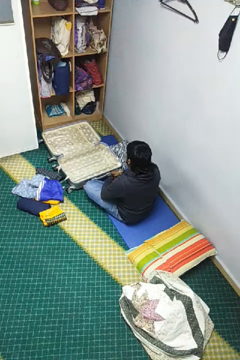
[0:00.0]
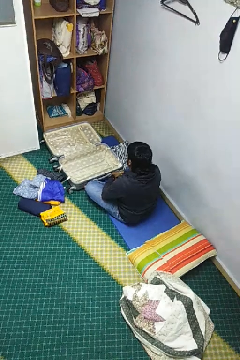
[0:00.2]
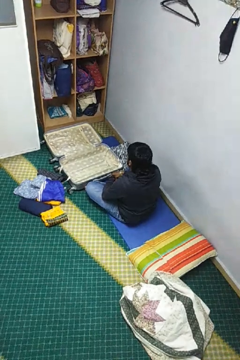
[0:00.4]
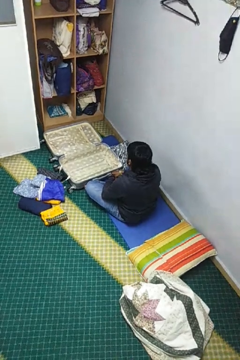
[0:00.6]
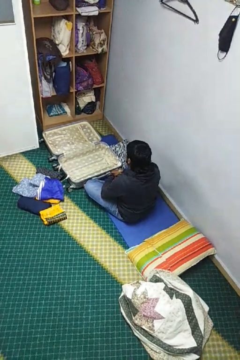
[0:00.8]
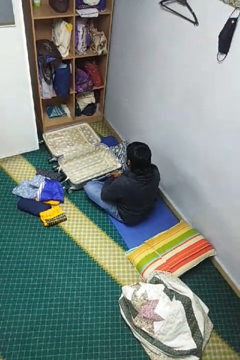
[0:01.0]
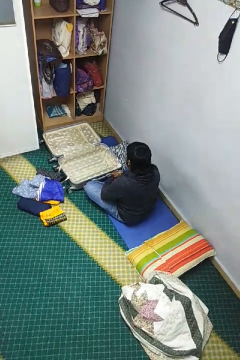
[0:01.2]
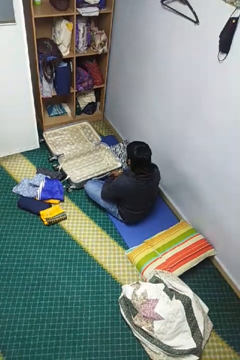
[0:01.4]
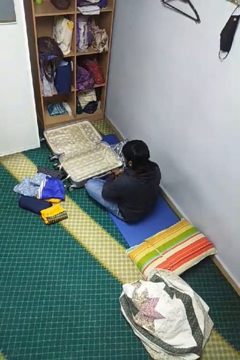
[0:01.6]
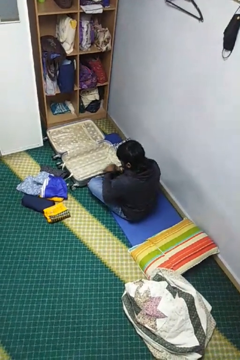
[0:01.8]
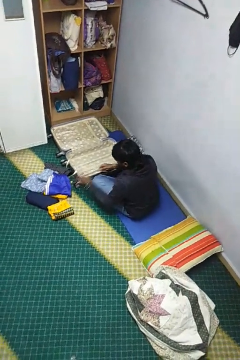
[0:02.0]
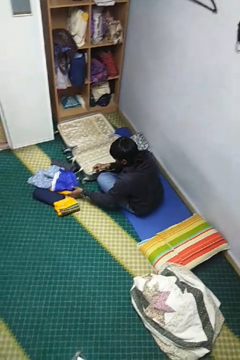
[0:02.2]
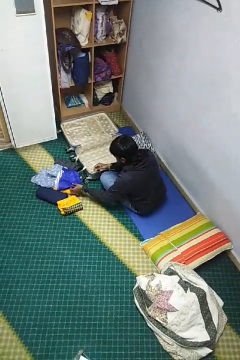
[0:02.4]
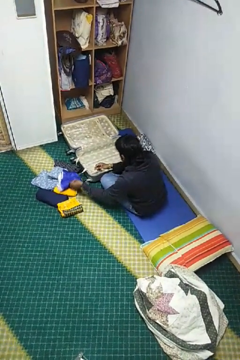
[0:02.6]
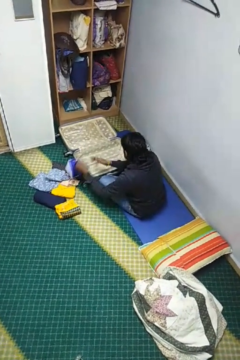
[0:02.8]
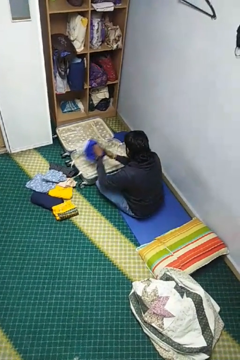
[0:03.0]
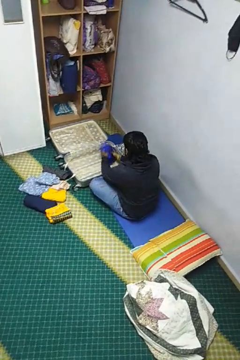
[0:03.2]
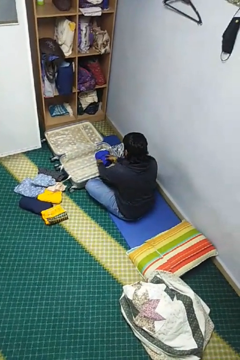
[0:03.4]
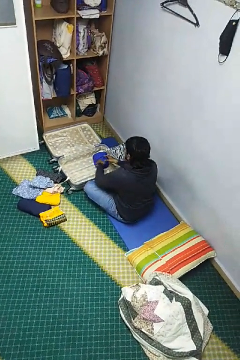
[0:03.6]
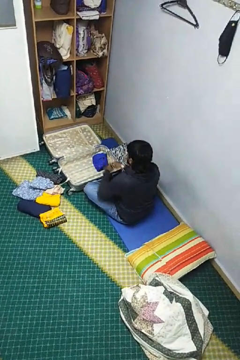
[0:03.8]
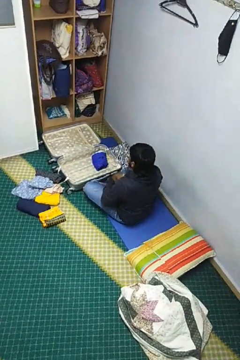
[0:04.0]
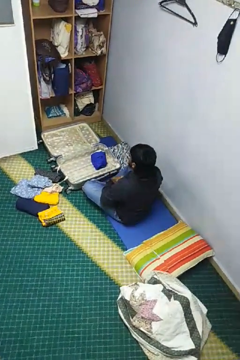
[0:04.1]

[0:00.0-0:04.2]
person loads clothes into suitcase

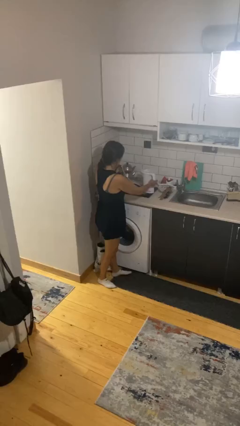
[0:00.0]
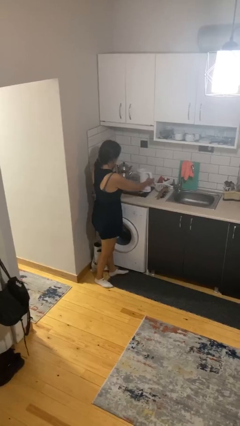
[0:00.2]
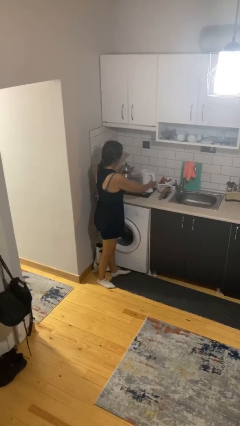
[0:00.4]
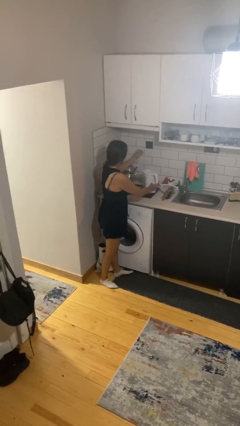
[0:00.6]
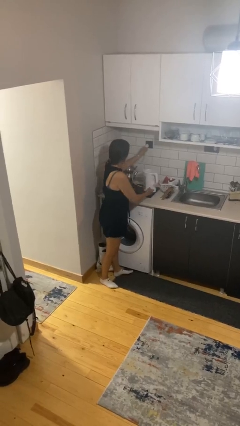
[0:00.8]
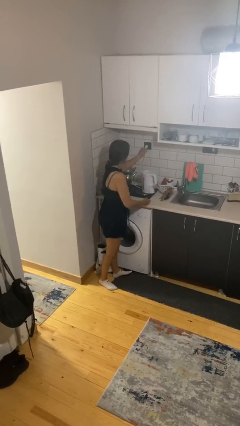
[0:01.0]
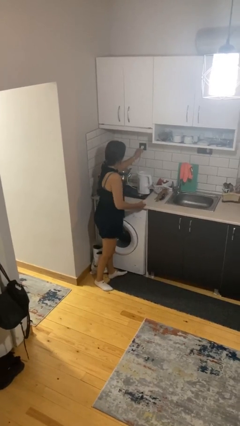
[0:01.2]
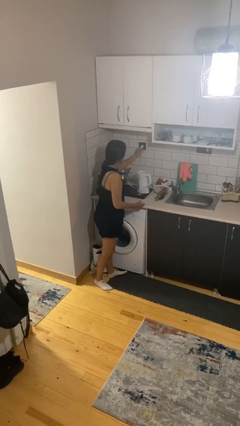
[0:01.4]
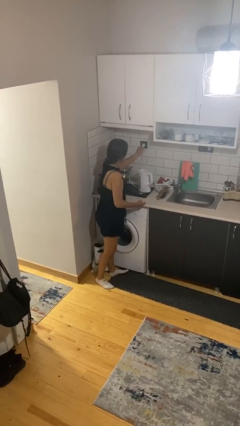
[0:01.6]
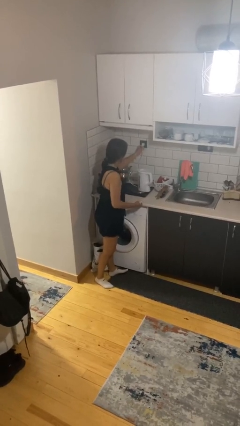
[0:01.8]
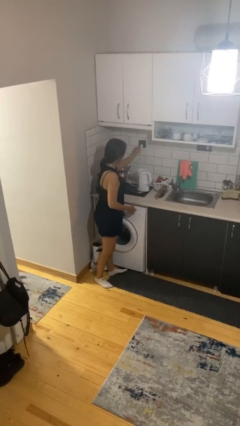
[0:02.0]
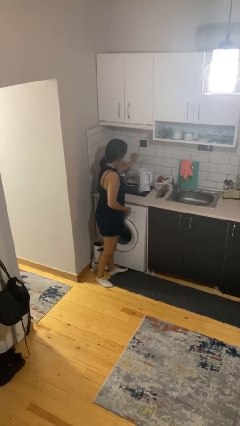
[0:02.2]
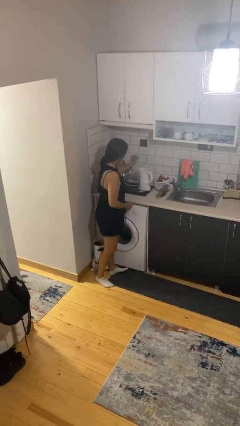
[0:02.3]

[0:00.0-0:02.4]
person plugs into electrical socket

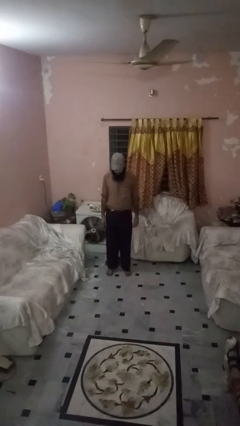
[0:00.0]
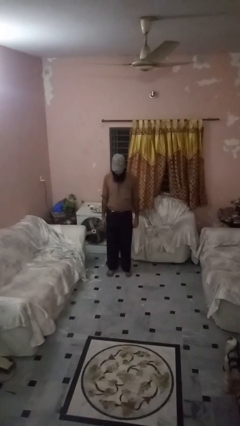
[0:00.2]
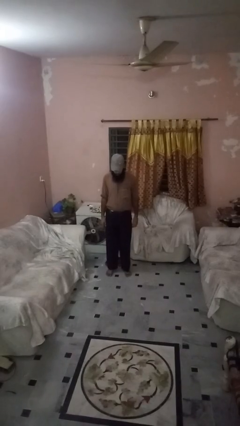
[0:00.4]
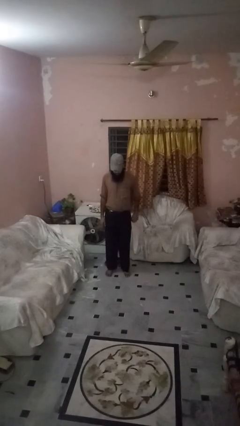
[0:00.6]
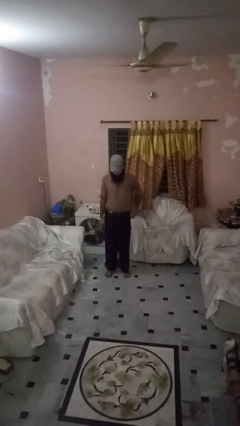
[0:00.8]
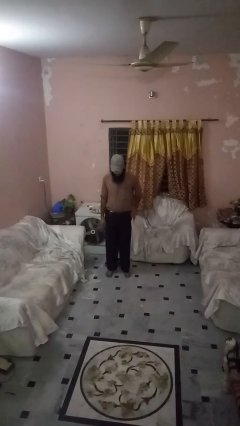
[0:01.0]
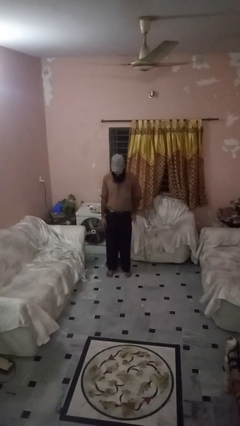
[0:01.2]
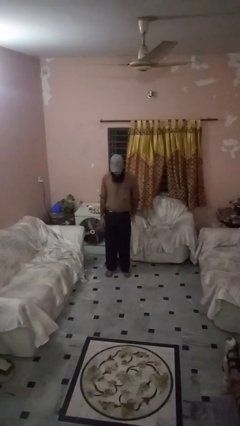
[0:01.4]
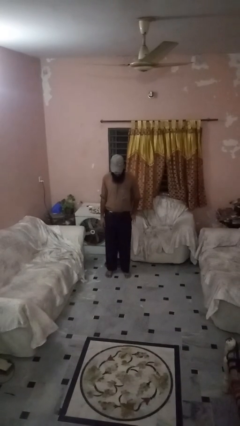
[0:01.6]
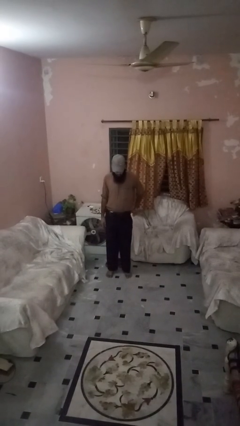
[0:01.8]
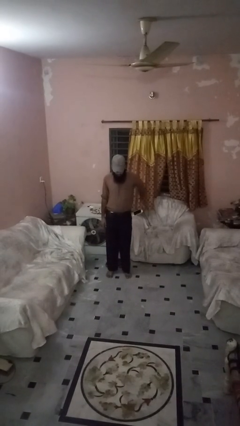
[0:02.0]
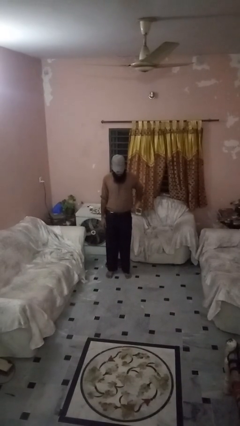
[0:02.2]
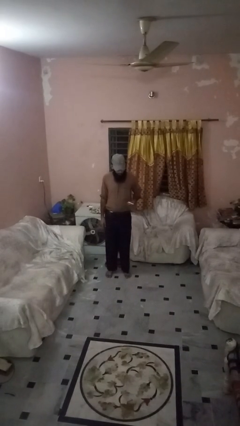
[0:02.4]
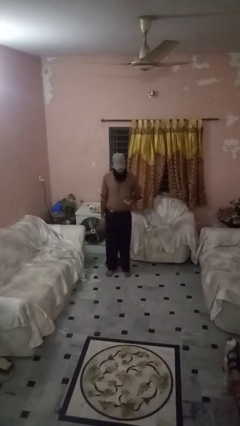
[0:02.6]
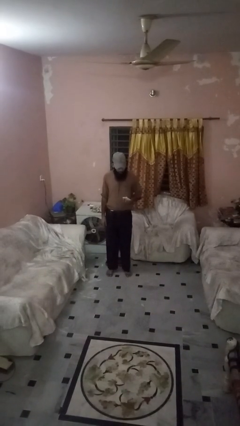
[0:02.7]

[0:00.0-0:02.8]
person takes phone from pocket

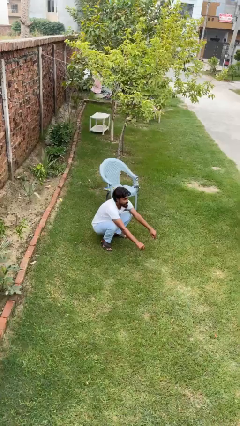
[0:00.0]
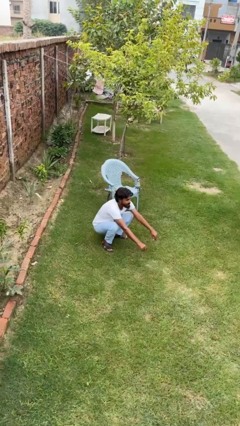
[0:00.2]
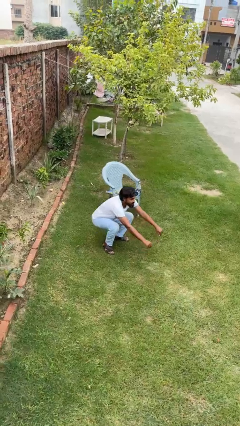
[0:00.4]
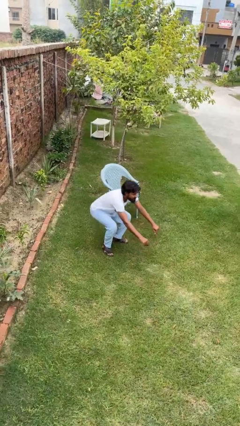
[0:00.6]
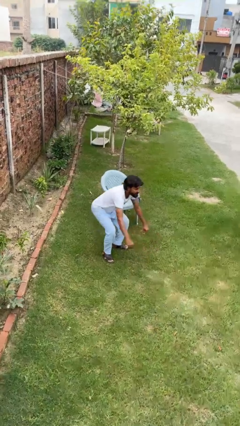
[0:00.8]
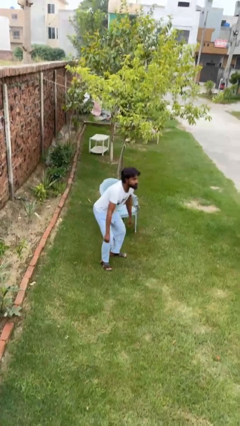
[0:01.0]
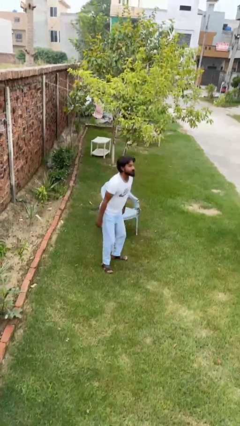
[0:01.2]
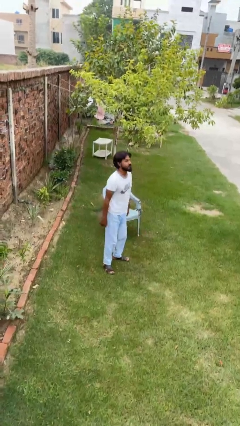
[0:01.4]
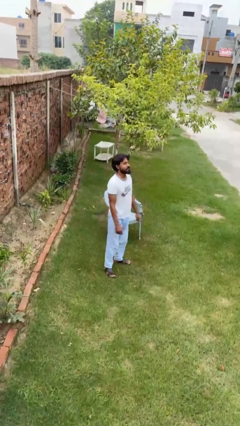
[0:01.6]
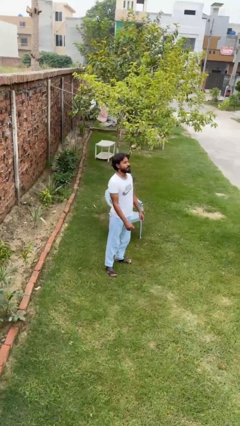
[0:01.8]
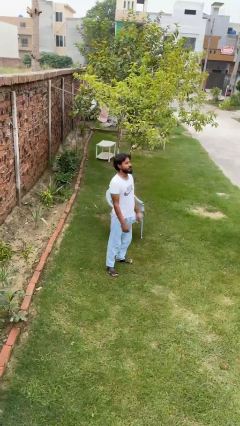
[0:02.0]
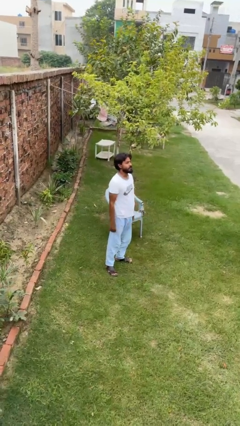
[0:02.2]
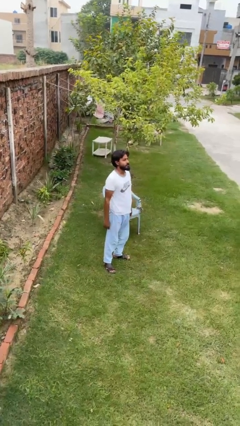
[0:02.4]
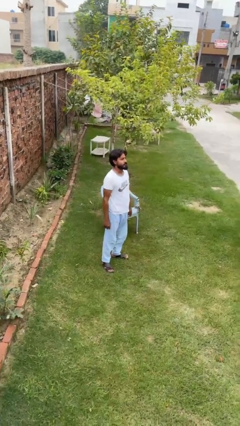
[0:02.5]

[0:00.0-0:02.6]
person stands up

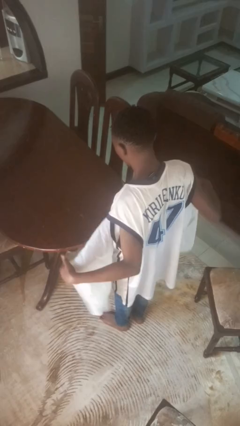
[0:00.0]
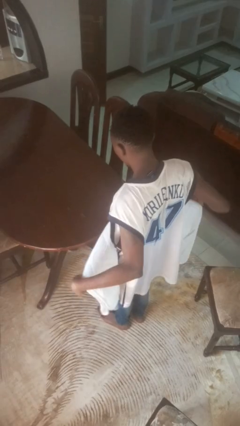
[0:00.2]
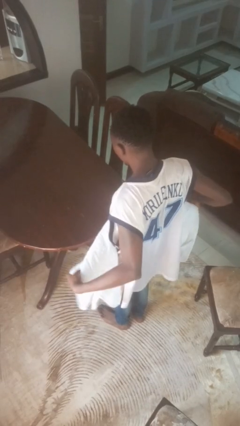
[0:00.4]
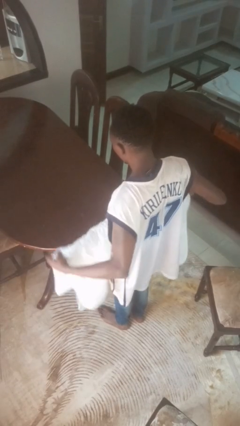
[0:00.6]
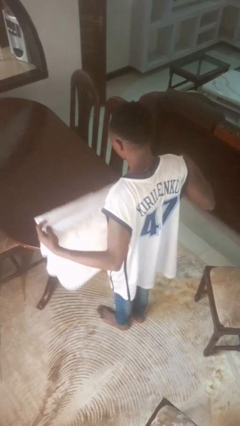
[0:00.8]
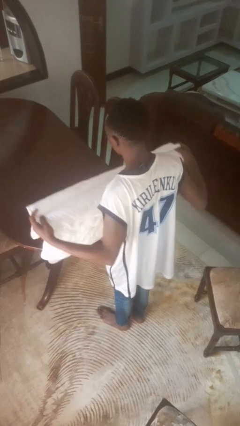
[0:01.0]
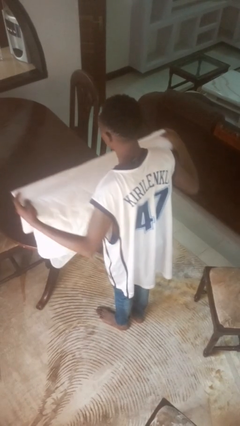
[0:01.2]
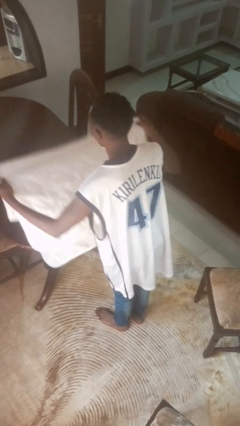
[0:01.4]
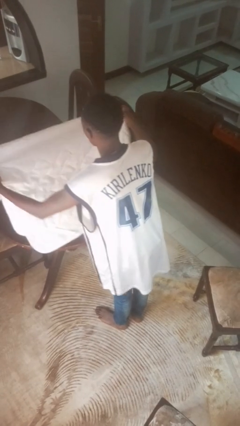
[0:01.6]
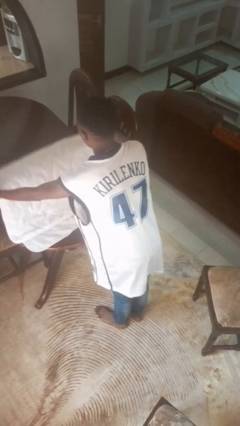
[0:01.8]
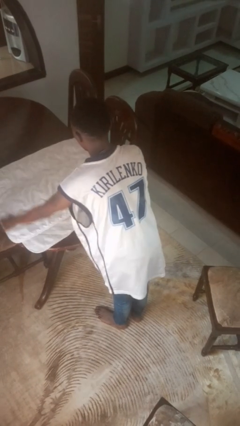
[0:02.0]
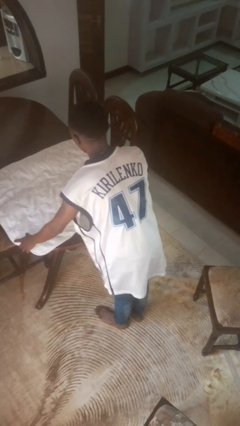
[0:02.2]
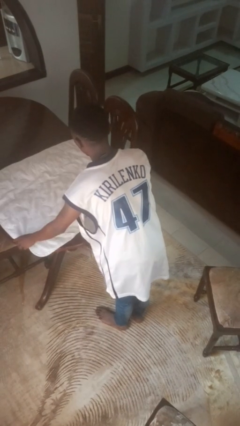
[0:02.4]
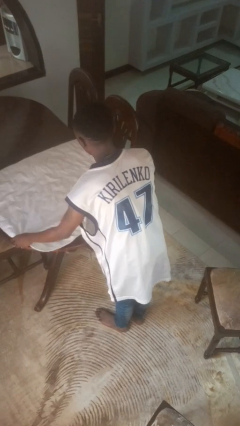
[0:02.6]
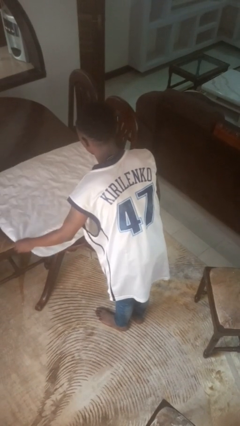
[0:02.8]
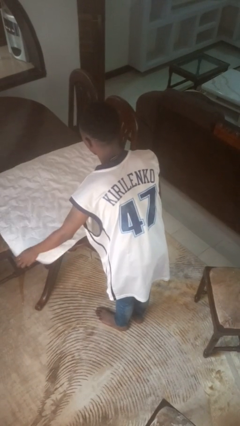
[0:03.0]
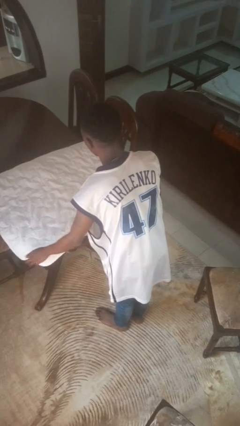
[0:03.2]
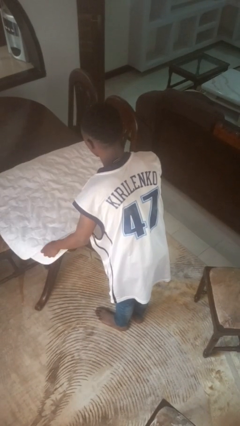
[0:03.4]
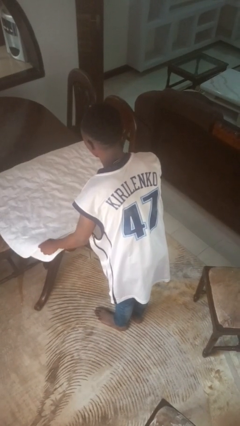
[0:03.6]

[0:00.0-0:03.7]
person spreads tablecloth

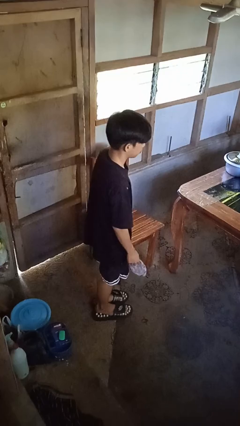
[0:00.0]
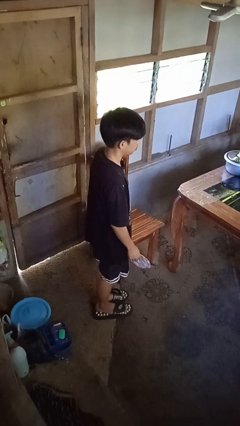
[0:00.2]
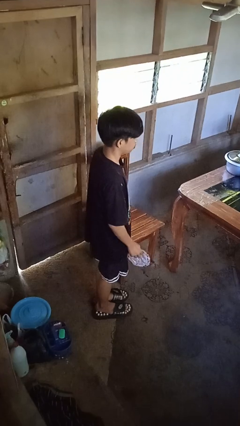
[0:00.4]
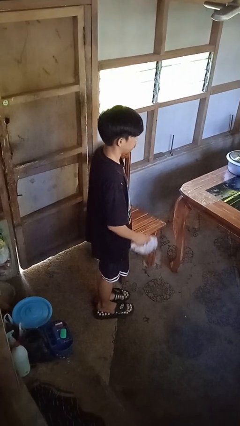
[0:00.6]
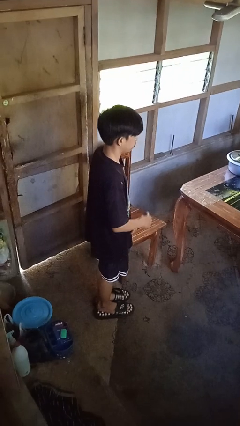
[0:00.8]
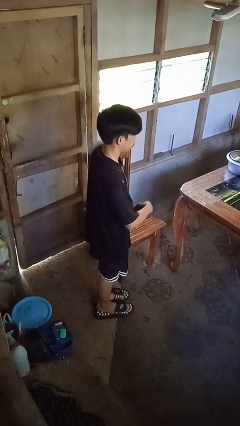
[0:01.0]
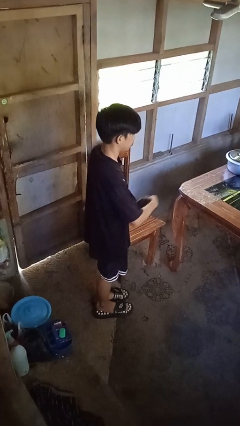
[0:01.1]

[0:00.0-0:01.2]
person throws object on table

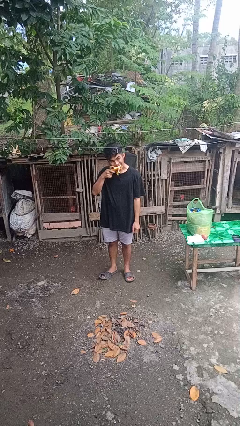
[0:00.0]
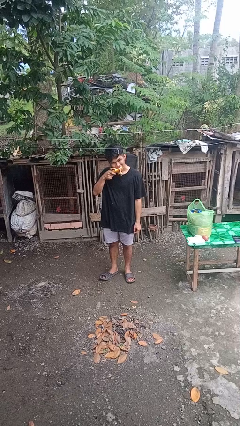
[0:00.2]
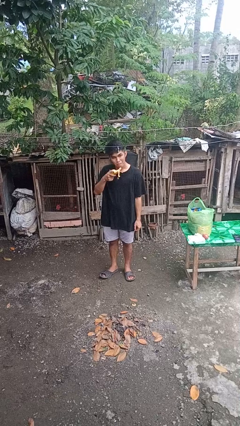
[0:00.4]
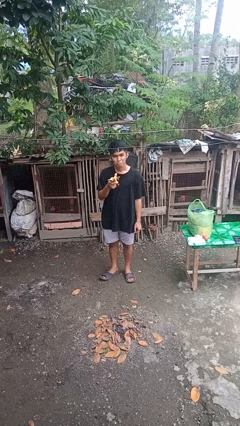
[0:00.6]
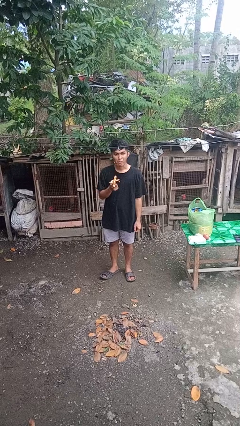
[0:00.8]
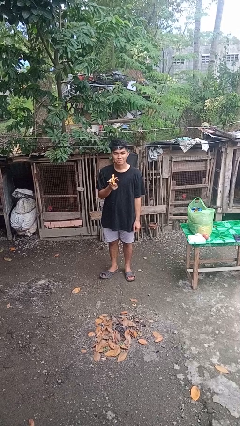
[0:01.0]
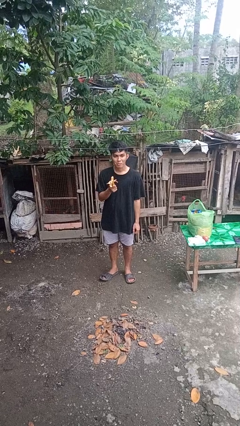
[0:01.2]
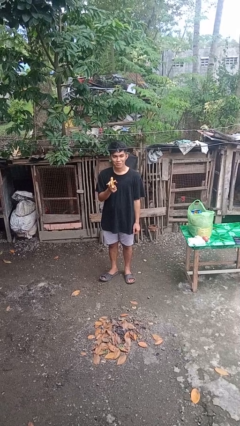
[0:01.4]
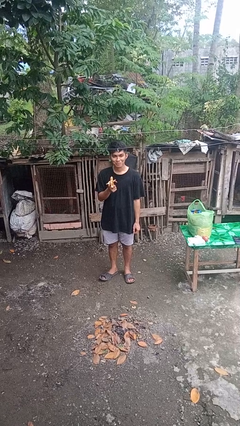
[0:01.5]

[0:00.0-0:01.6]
person eats banana
